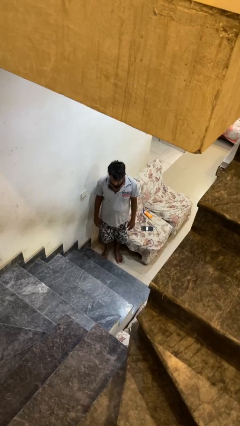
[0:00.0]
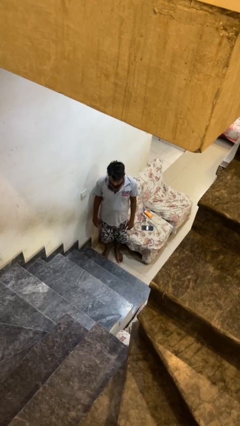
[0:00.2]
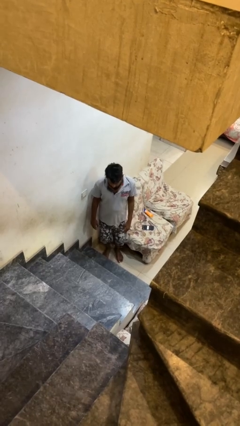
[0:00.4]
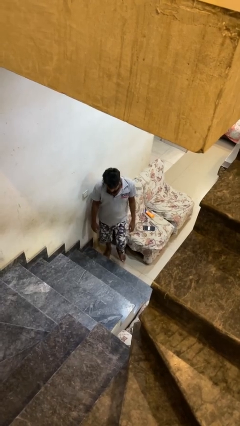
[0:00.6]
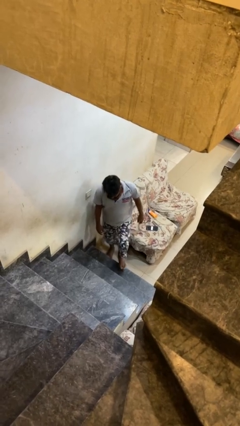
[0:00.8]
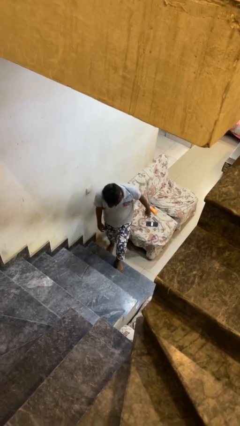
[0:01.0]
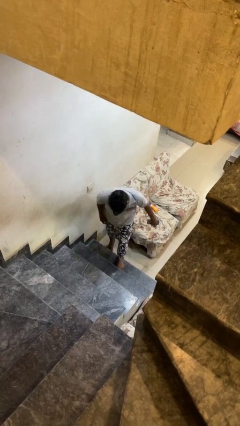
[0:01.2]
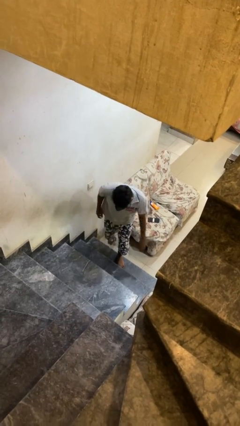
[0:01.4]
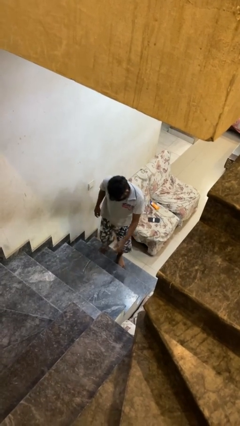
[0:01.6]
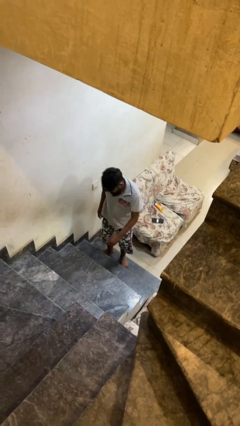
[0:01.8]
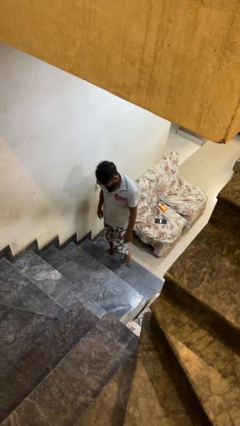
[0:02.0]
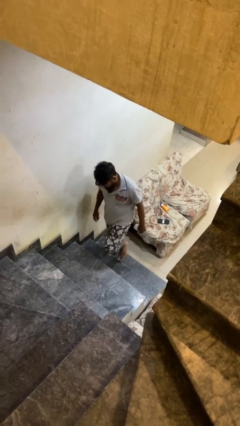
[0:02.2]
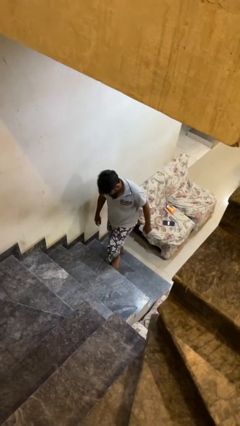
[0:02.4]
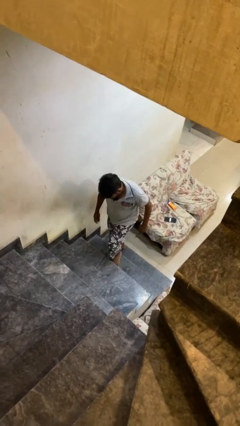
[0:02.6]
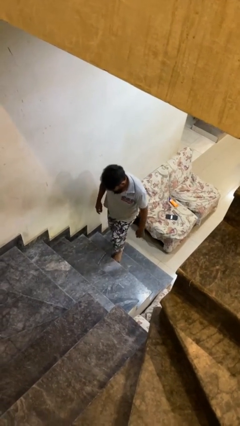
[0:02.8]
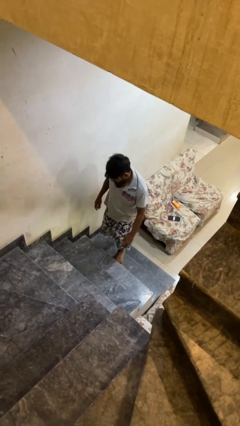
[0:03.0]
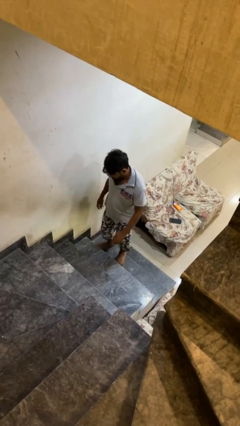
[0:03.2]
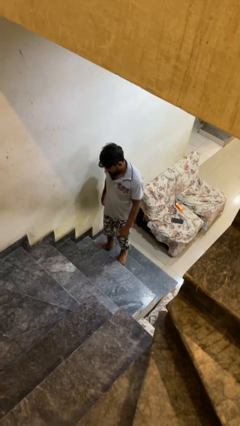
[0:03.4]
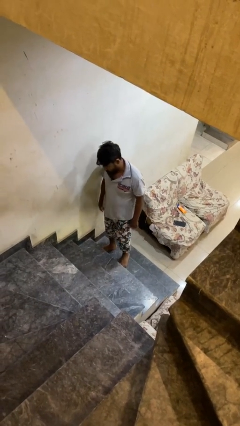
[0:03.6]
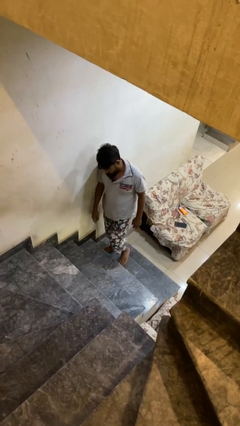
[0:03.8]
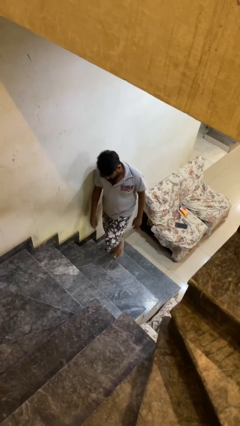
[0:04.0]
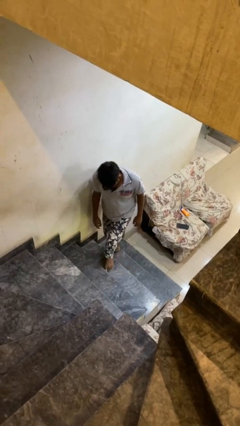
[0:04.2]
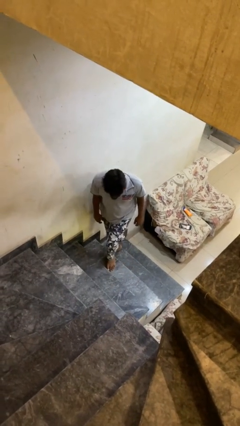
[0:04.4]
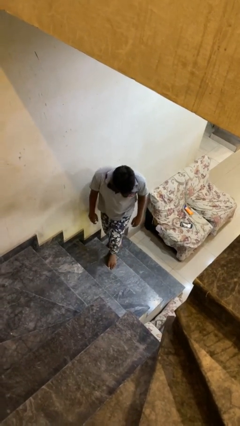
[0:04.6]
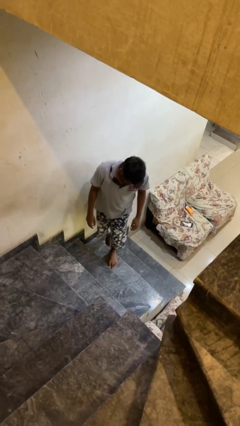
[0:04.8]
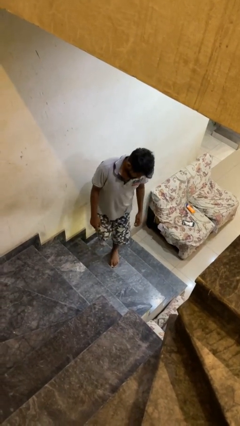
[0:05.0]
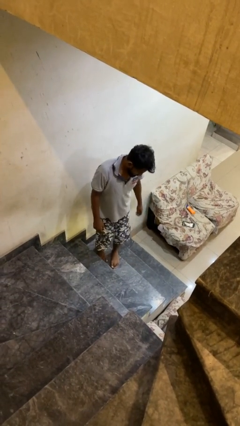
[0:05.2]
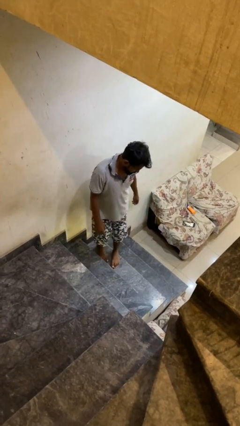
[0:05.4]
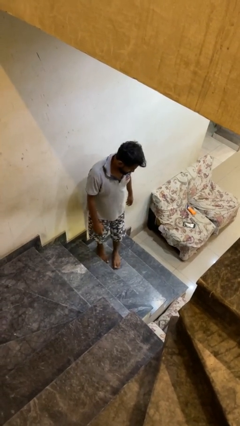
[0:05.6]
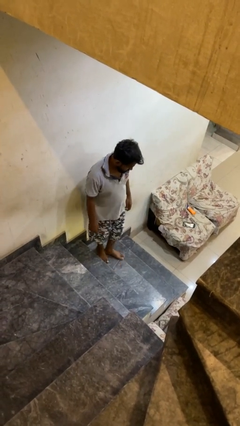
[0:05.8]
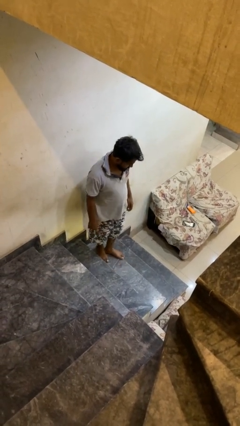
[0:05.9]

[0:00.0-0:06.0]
person climbs up stairs

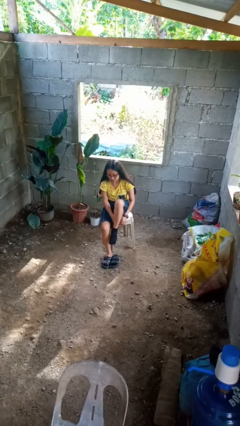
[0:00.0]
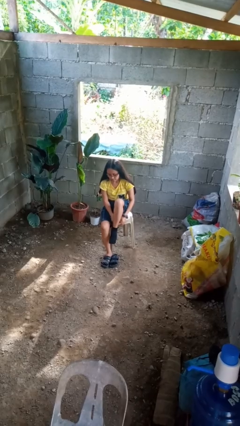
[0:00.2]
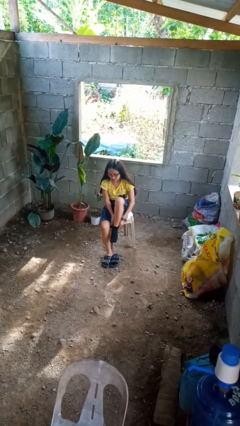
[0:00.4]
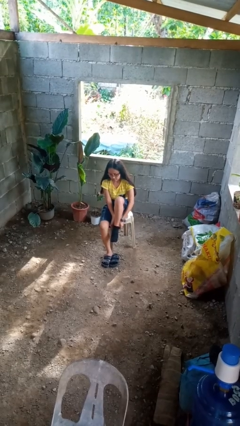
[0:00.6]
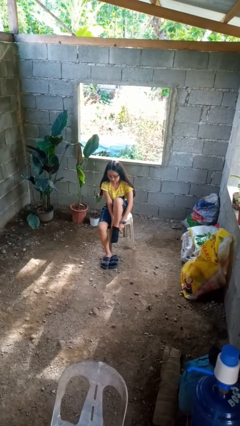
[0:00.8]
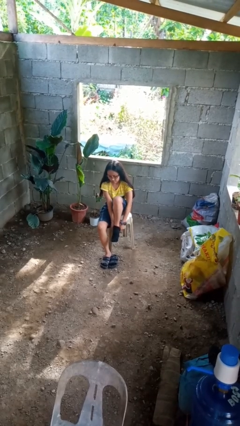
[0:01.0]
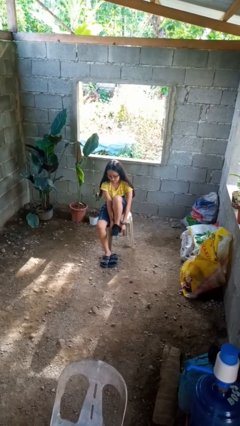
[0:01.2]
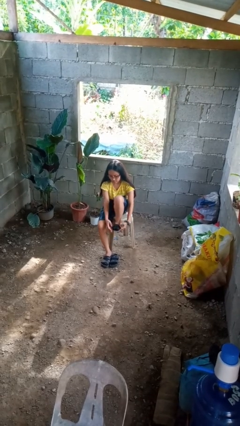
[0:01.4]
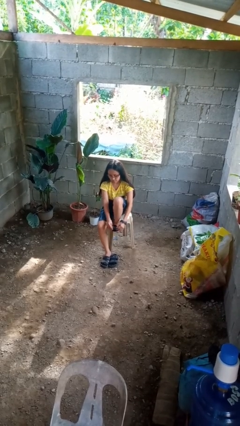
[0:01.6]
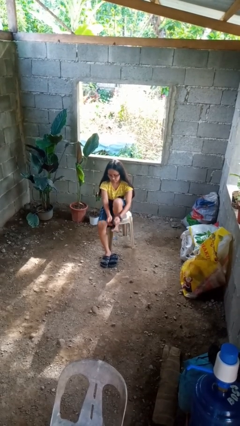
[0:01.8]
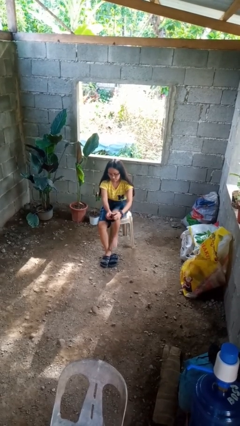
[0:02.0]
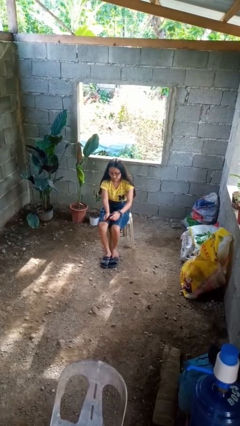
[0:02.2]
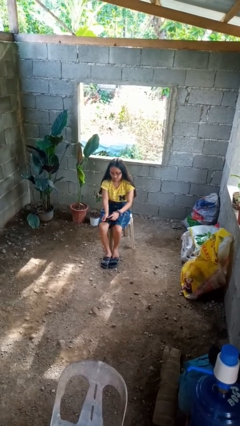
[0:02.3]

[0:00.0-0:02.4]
person takes off socks

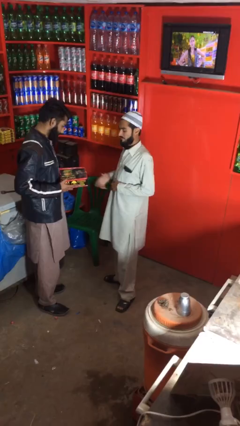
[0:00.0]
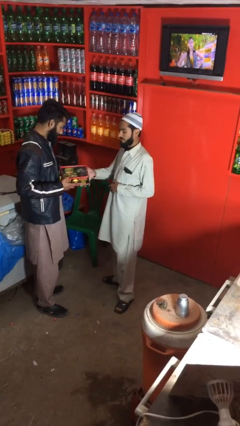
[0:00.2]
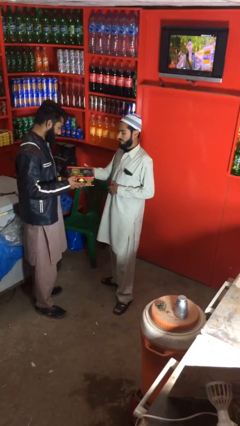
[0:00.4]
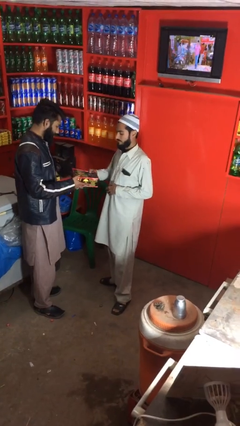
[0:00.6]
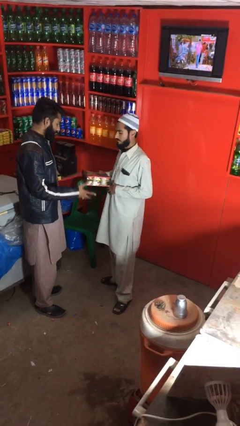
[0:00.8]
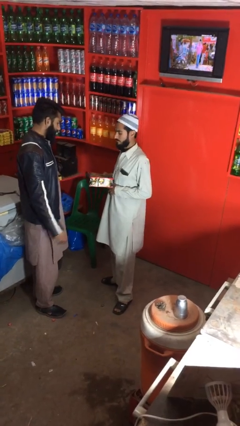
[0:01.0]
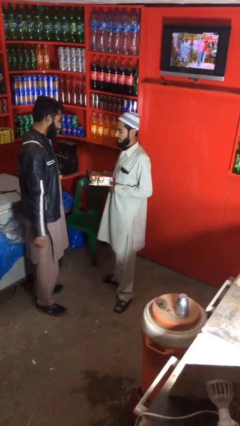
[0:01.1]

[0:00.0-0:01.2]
person transfers object to person

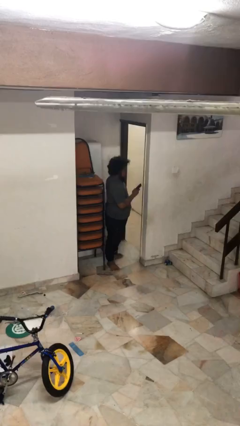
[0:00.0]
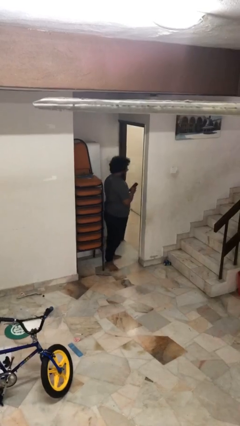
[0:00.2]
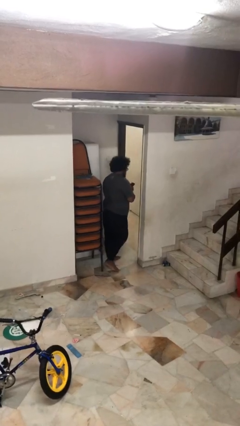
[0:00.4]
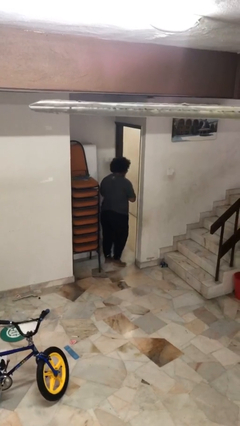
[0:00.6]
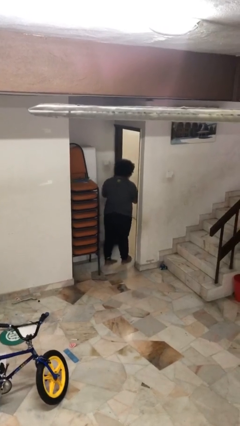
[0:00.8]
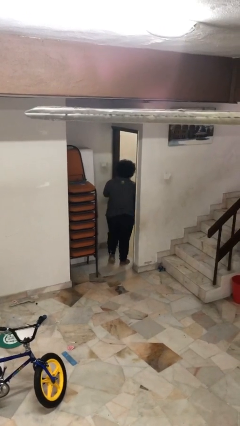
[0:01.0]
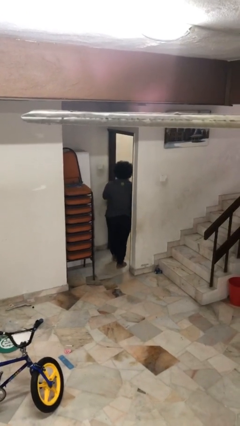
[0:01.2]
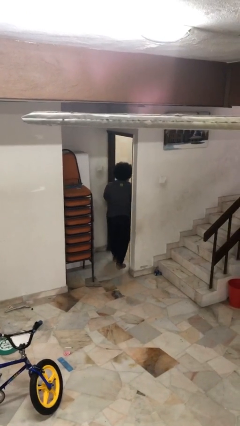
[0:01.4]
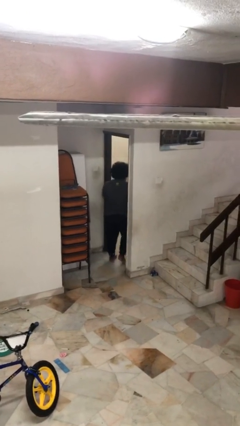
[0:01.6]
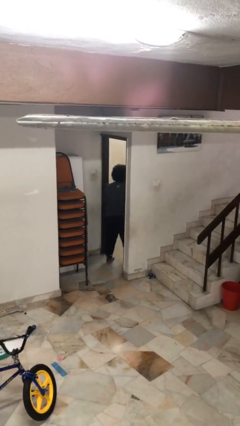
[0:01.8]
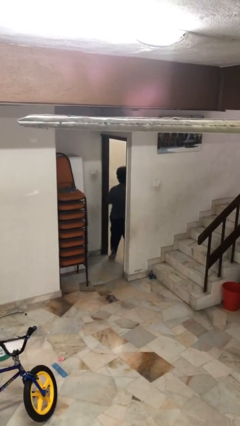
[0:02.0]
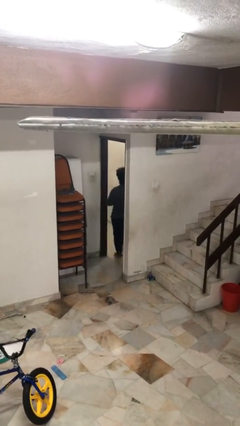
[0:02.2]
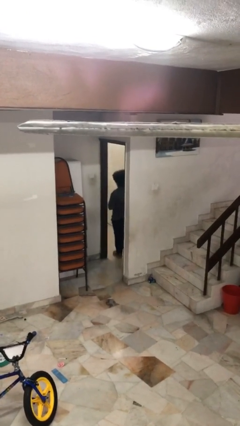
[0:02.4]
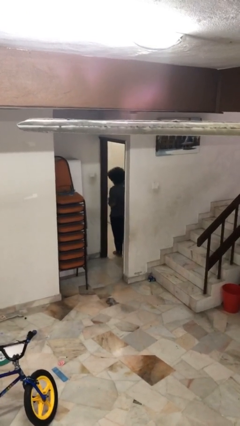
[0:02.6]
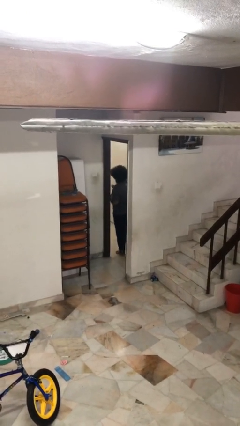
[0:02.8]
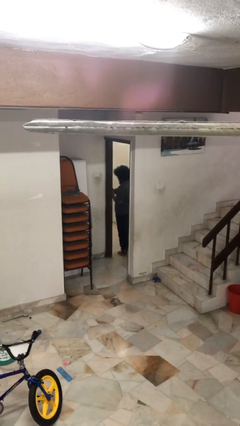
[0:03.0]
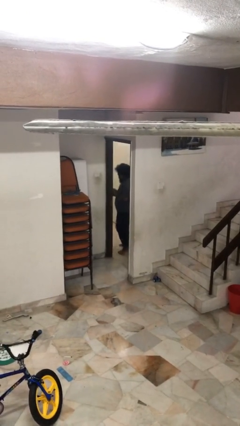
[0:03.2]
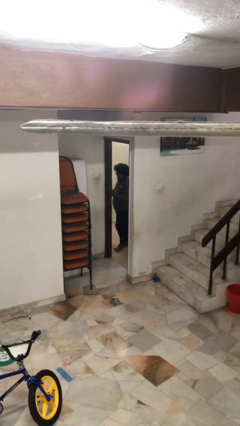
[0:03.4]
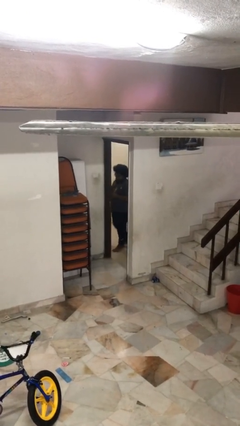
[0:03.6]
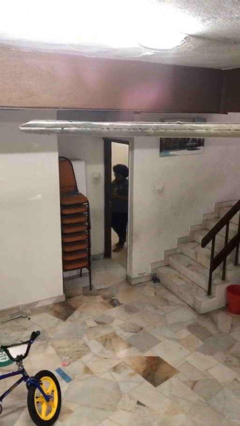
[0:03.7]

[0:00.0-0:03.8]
person exits scene through structure

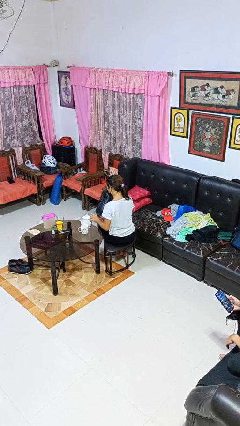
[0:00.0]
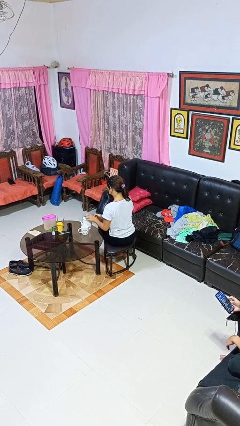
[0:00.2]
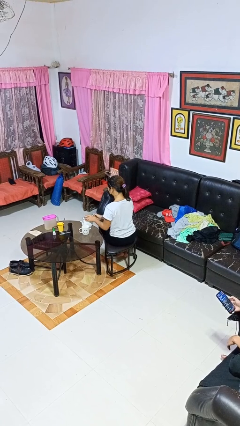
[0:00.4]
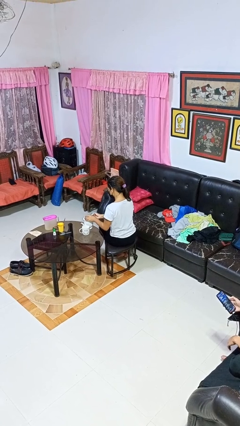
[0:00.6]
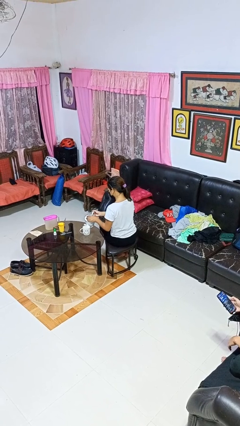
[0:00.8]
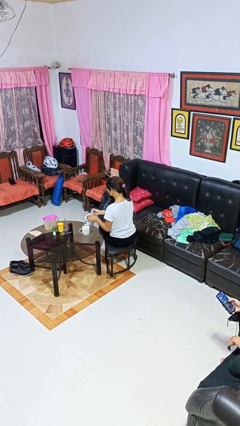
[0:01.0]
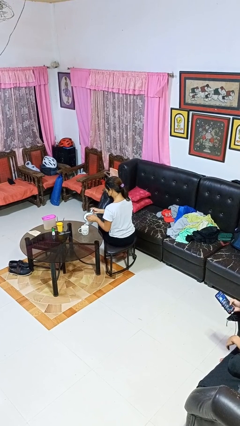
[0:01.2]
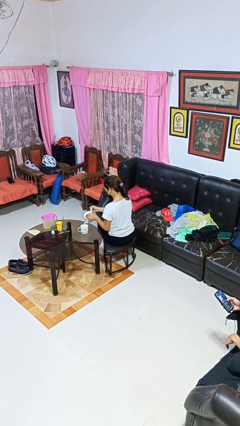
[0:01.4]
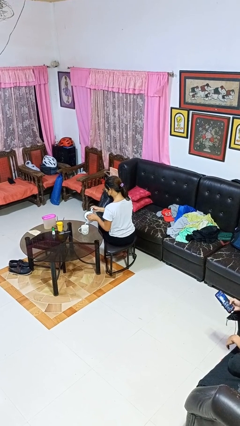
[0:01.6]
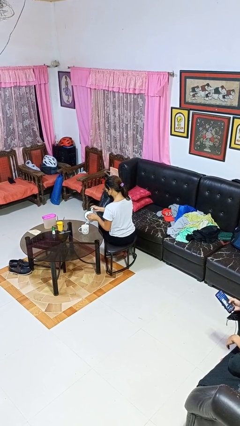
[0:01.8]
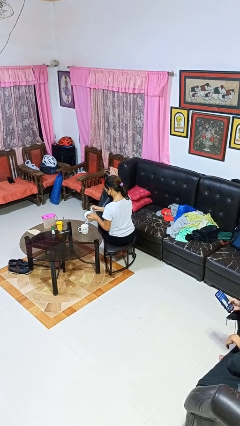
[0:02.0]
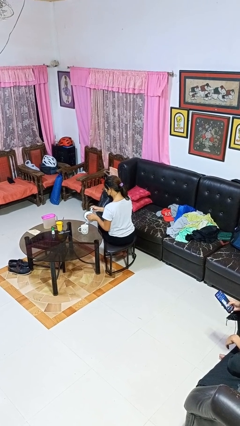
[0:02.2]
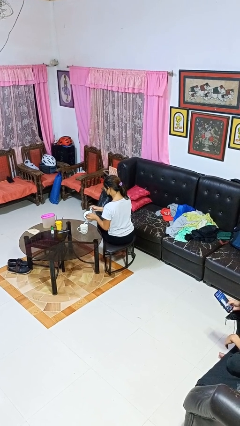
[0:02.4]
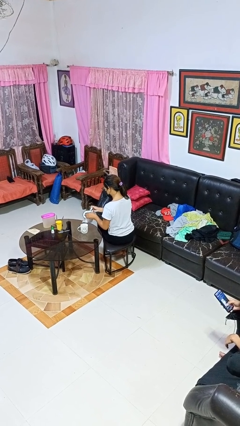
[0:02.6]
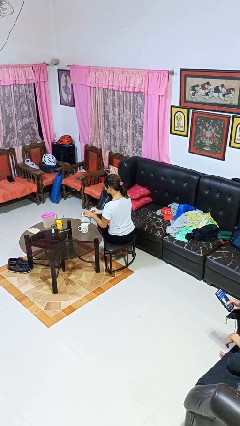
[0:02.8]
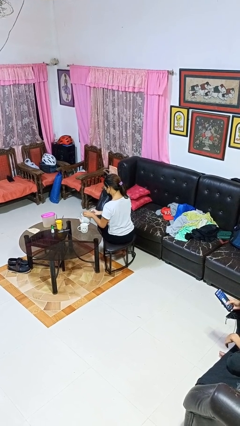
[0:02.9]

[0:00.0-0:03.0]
person pours coffee into mug

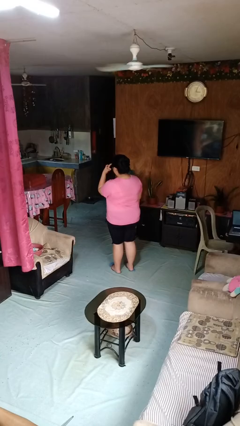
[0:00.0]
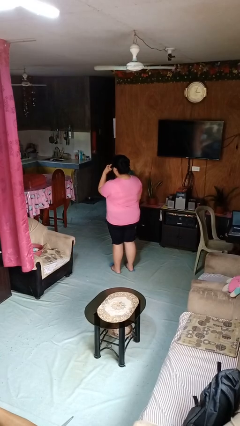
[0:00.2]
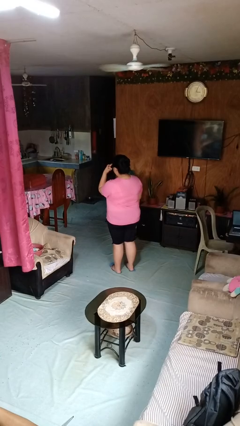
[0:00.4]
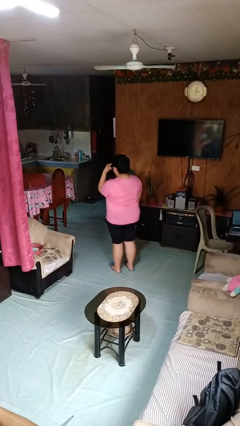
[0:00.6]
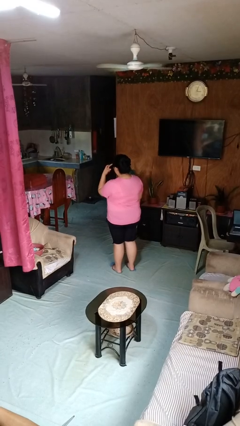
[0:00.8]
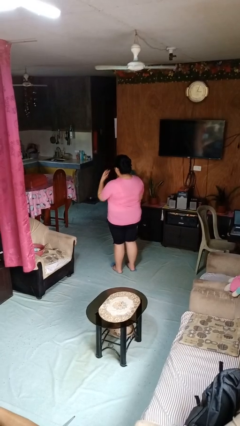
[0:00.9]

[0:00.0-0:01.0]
person gestures watch closely

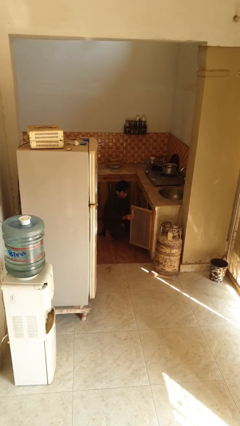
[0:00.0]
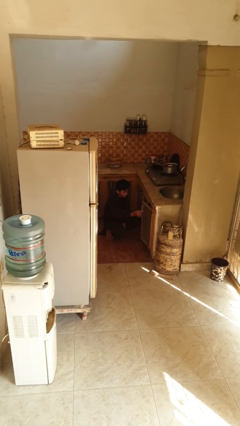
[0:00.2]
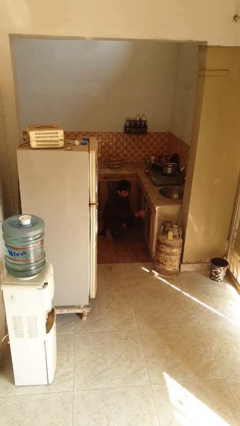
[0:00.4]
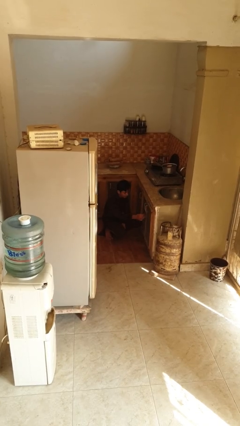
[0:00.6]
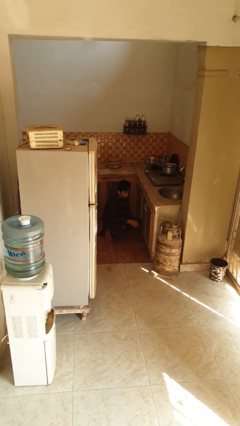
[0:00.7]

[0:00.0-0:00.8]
person closes kitchen drawer
